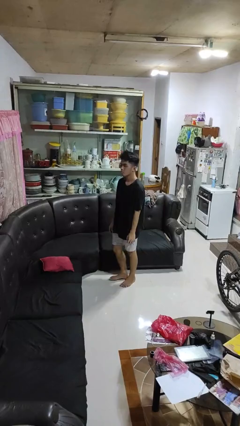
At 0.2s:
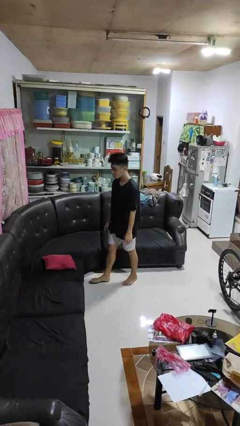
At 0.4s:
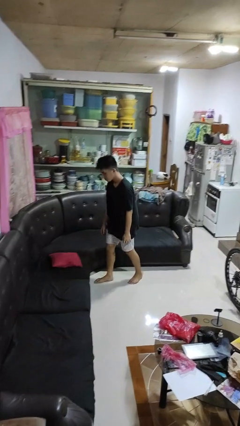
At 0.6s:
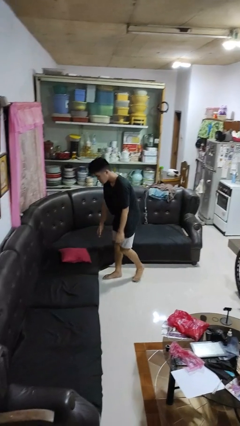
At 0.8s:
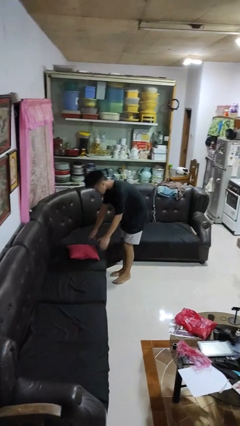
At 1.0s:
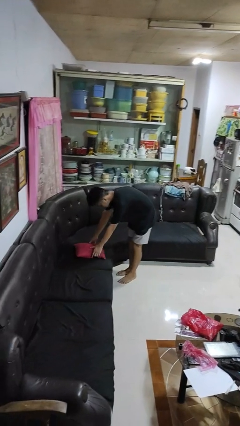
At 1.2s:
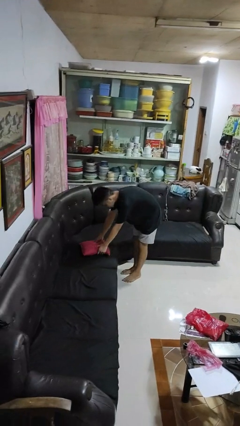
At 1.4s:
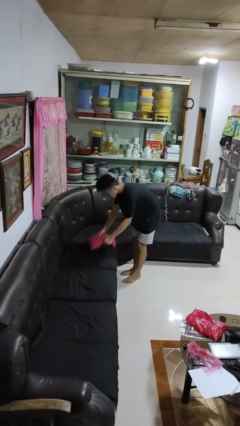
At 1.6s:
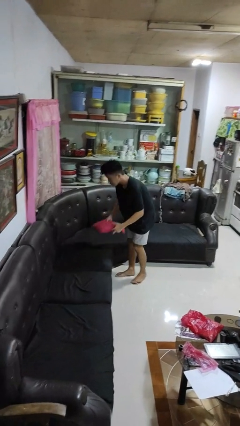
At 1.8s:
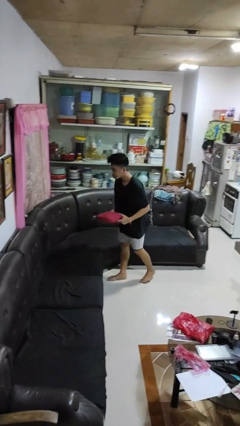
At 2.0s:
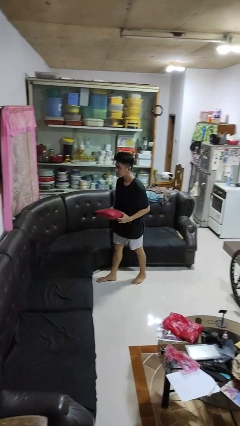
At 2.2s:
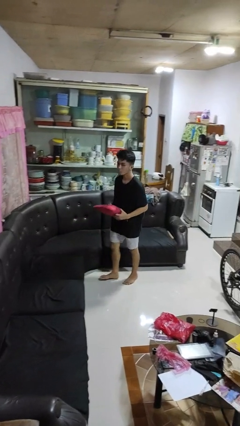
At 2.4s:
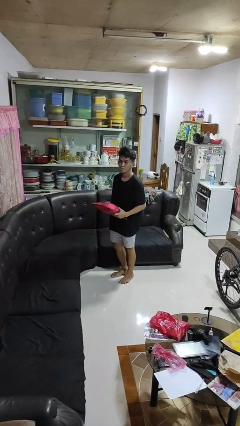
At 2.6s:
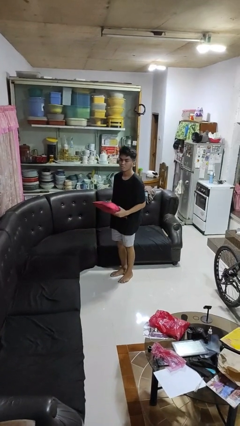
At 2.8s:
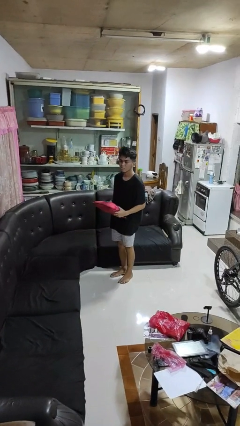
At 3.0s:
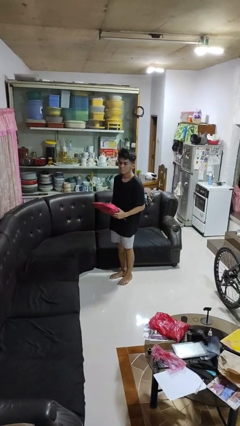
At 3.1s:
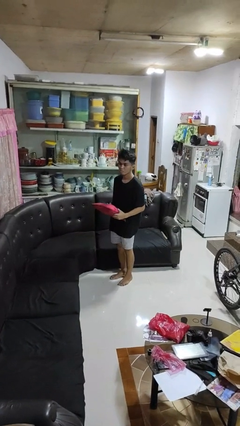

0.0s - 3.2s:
person picks up object from couch

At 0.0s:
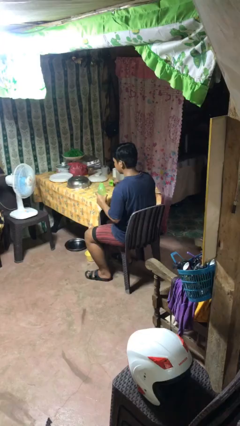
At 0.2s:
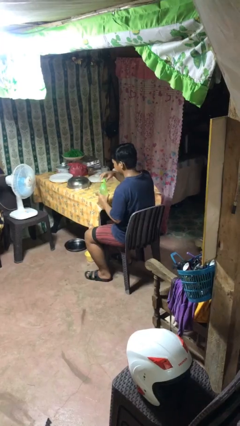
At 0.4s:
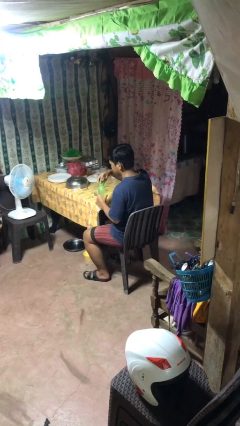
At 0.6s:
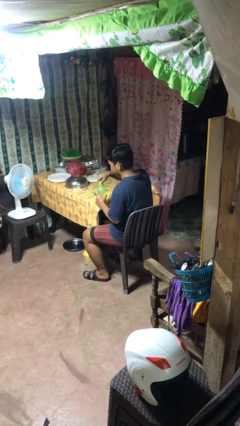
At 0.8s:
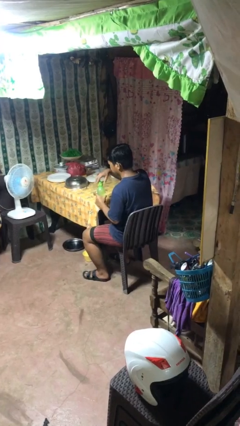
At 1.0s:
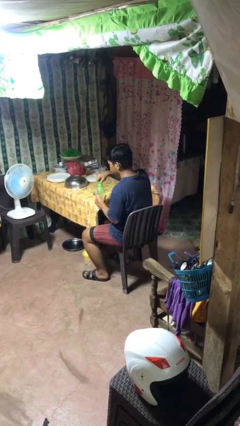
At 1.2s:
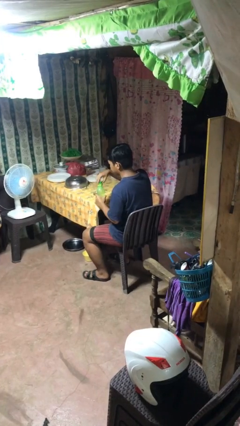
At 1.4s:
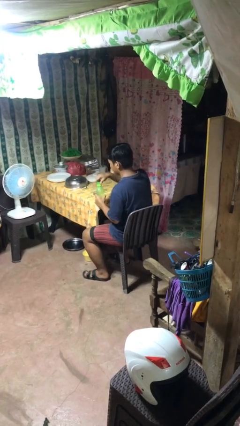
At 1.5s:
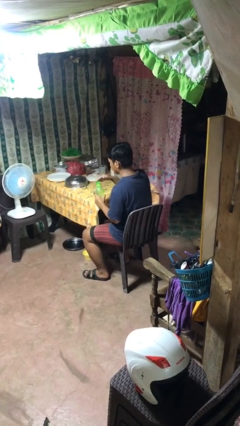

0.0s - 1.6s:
person screws lid to bottle

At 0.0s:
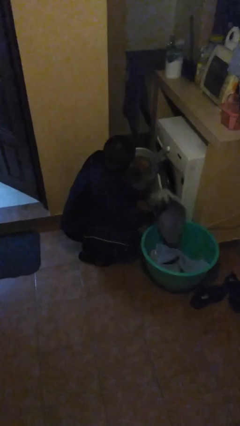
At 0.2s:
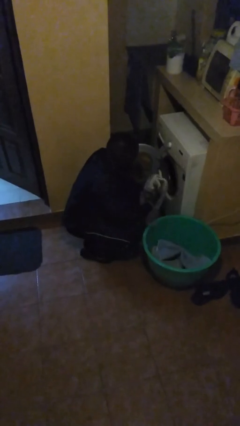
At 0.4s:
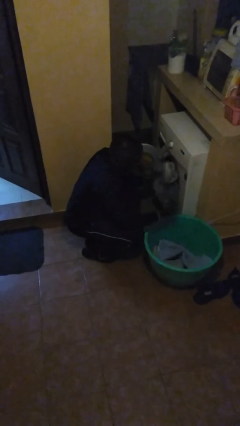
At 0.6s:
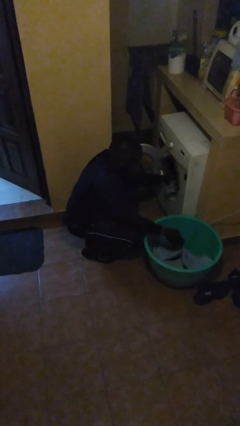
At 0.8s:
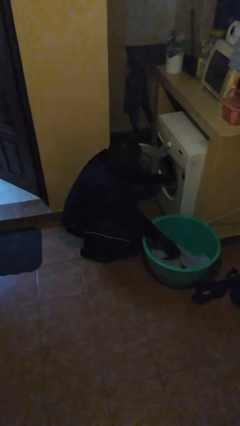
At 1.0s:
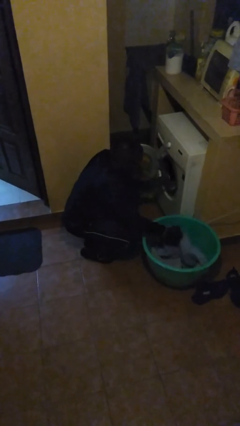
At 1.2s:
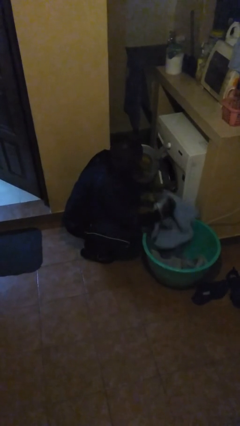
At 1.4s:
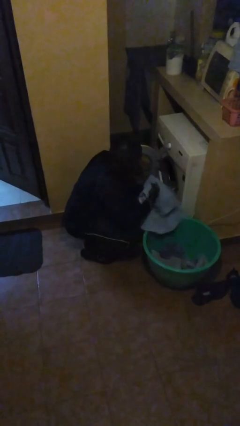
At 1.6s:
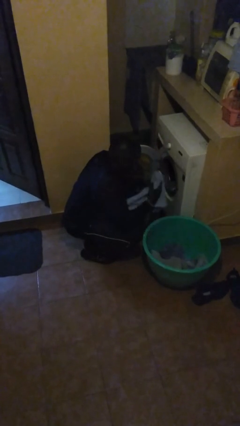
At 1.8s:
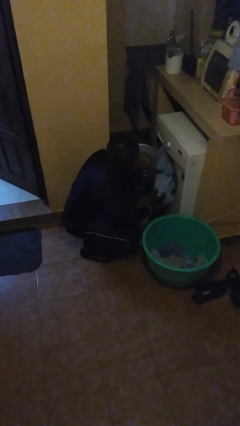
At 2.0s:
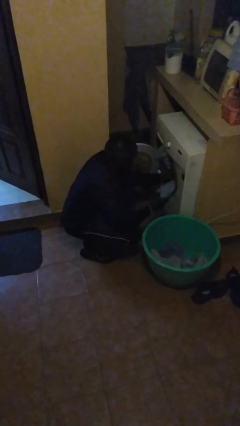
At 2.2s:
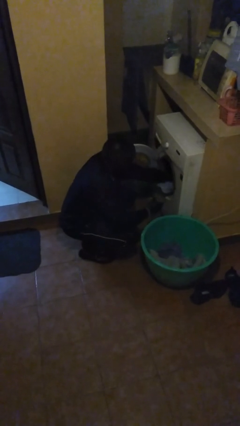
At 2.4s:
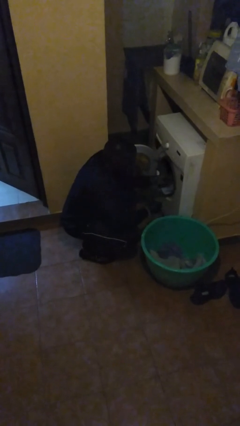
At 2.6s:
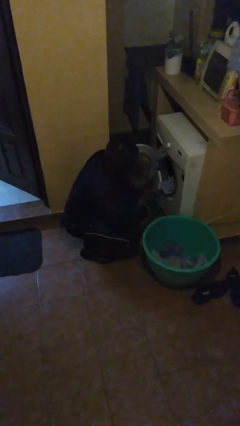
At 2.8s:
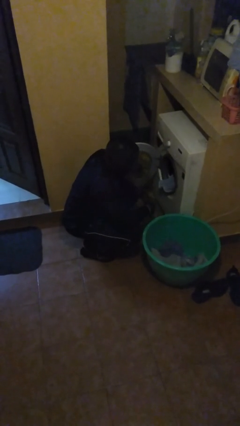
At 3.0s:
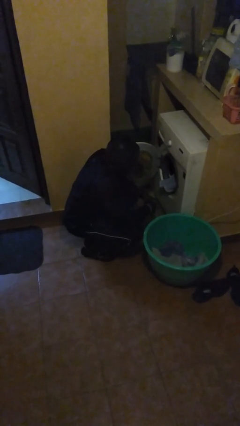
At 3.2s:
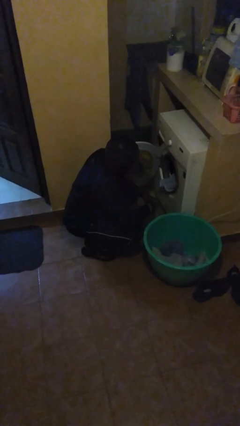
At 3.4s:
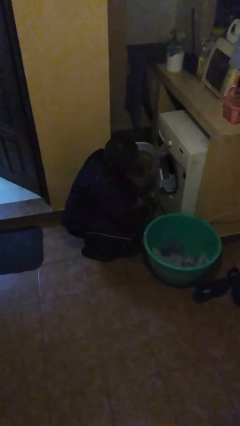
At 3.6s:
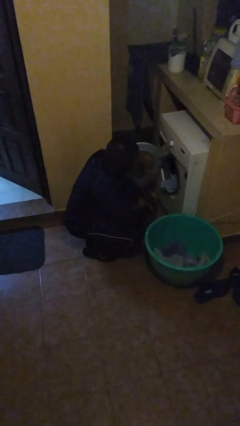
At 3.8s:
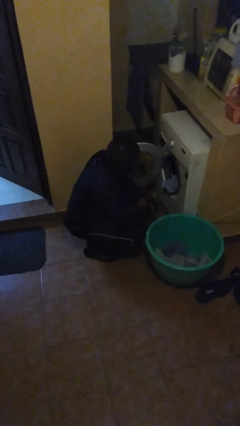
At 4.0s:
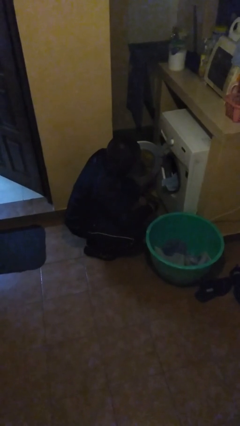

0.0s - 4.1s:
person loads clotheswasher

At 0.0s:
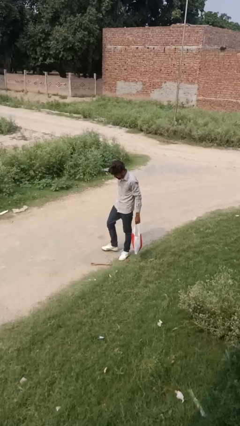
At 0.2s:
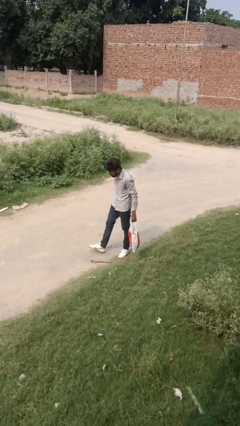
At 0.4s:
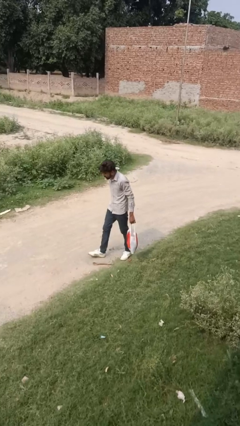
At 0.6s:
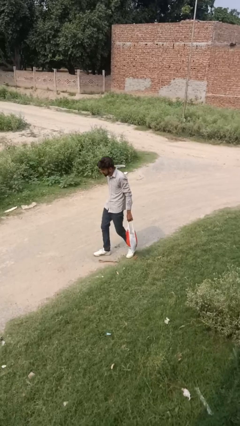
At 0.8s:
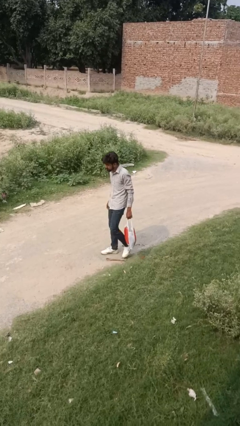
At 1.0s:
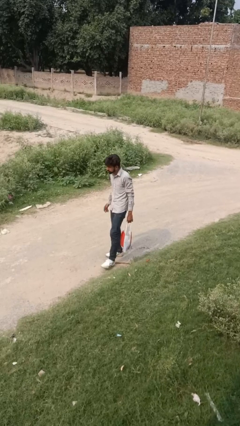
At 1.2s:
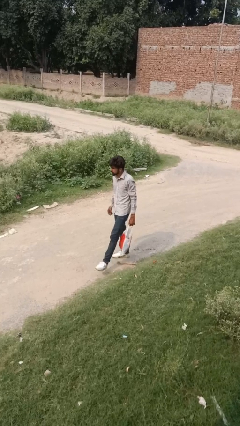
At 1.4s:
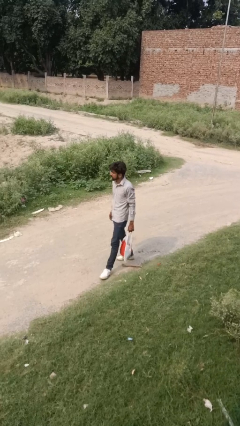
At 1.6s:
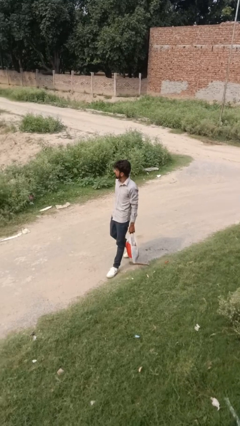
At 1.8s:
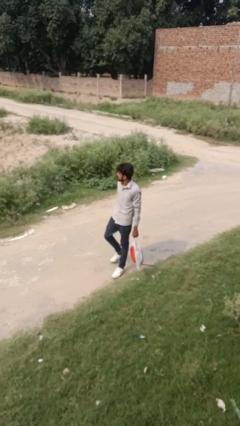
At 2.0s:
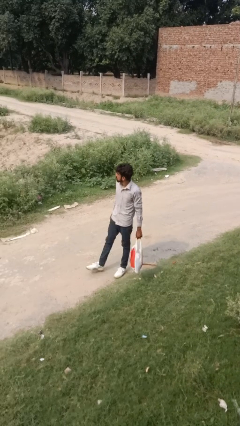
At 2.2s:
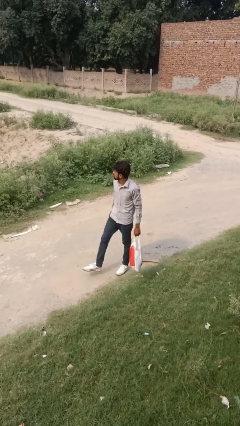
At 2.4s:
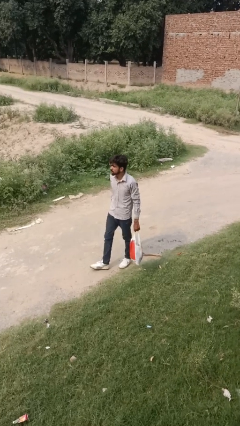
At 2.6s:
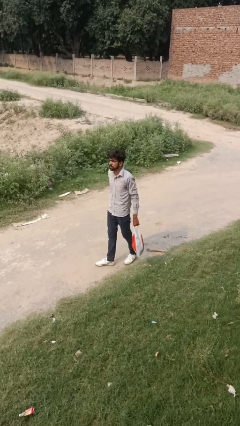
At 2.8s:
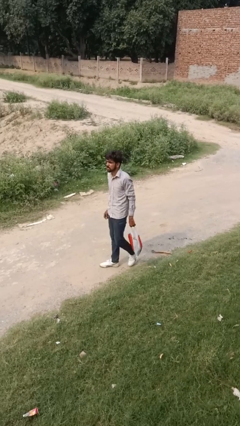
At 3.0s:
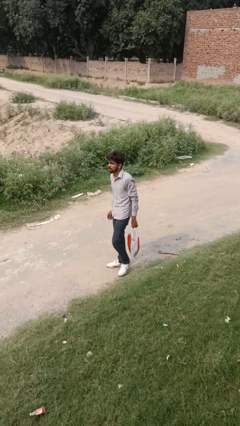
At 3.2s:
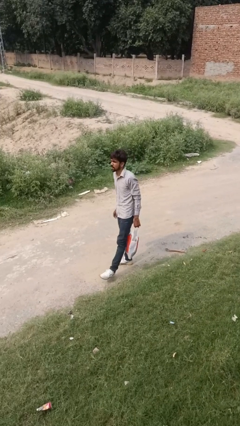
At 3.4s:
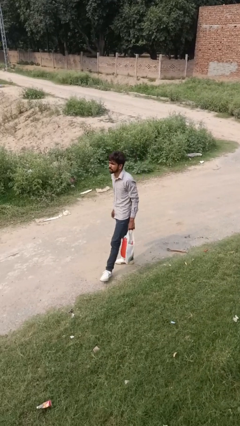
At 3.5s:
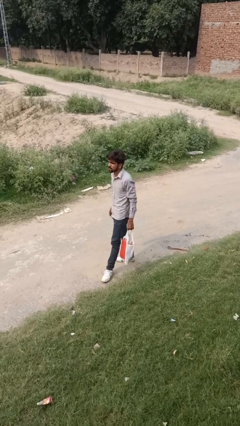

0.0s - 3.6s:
person carries groceries

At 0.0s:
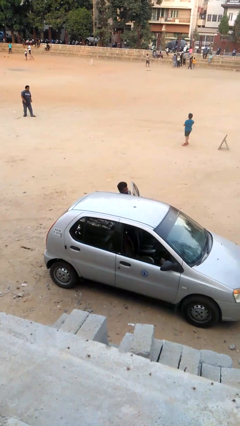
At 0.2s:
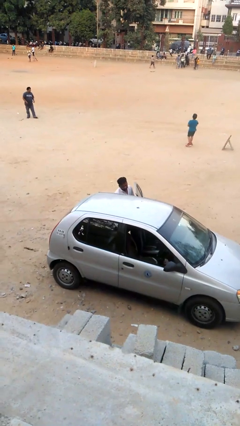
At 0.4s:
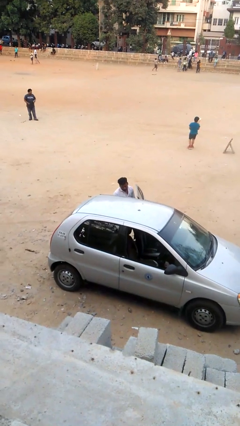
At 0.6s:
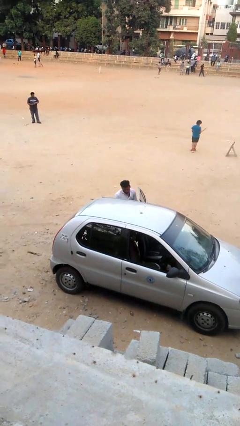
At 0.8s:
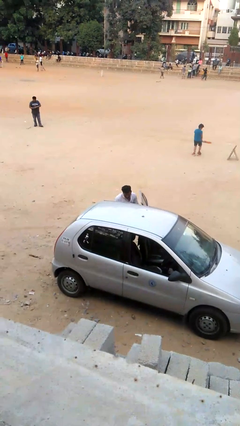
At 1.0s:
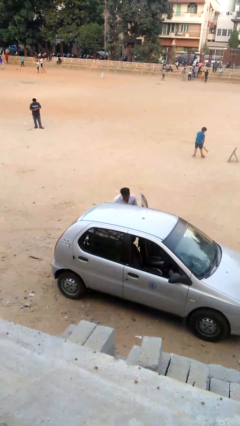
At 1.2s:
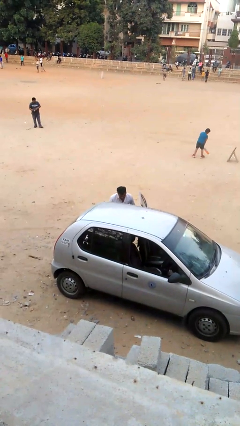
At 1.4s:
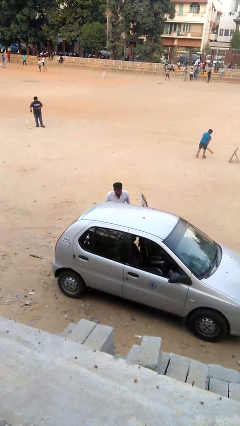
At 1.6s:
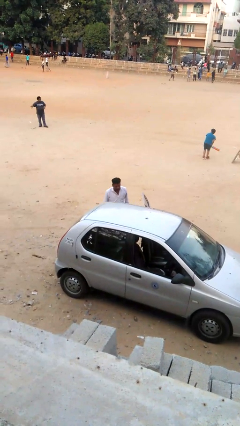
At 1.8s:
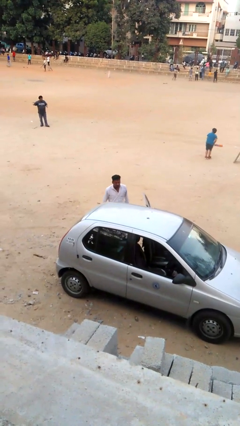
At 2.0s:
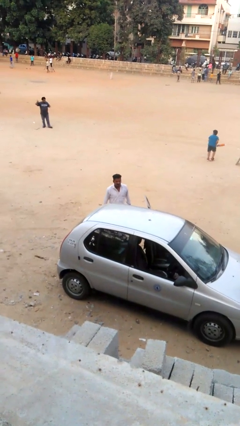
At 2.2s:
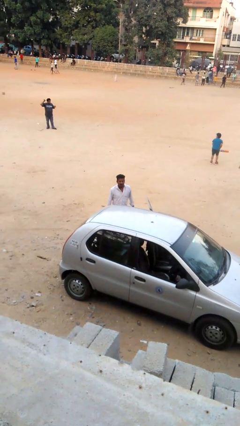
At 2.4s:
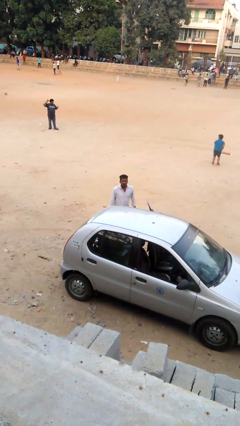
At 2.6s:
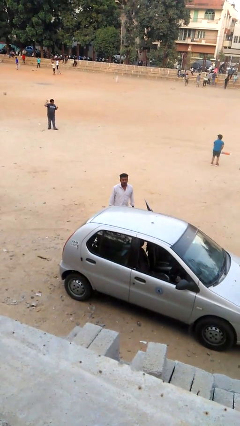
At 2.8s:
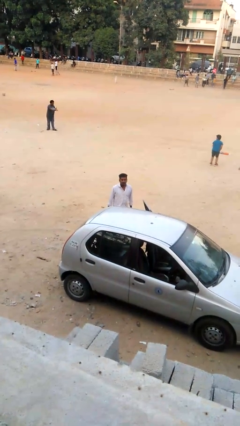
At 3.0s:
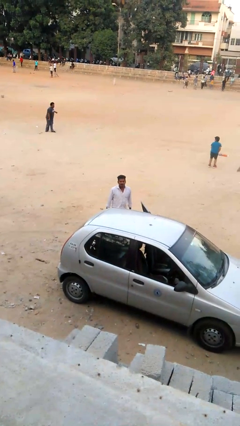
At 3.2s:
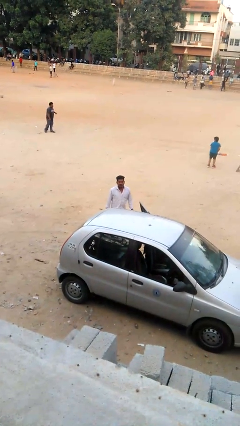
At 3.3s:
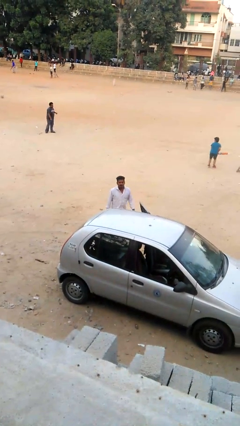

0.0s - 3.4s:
person exits car

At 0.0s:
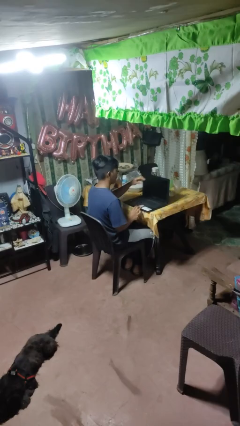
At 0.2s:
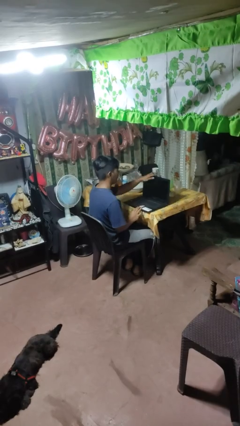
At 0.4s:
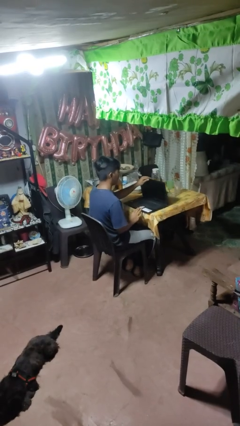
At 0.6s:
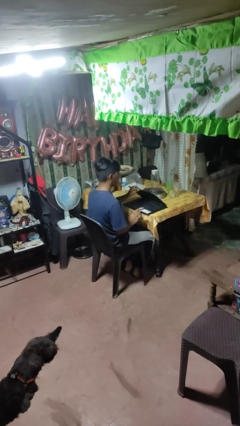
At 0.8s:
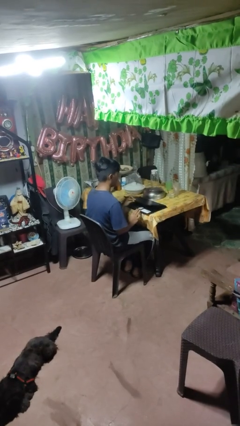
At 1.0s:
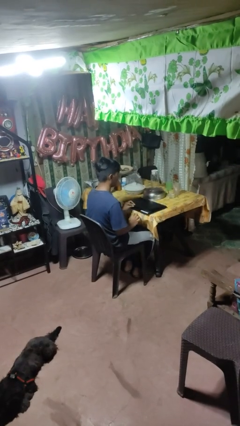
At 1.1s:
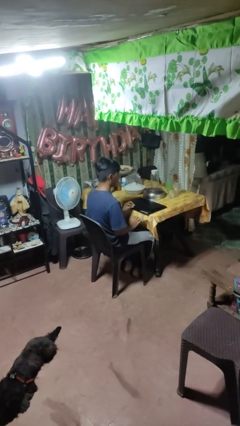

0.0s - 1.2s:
person closes laptop

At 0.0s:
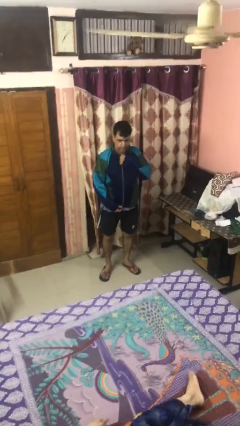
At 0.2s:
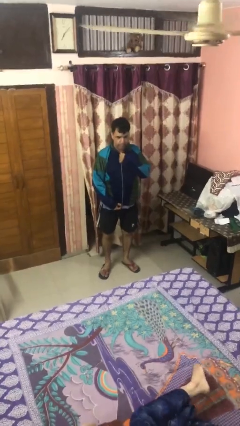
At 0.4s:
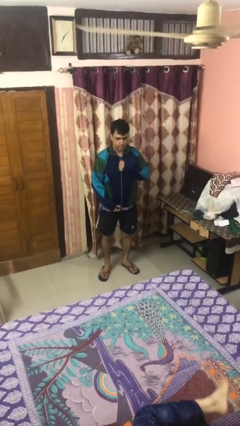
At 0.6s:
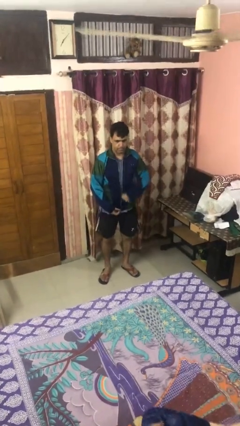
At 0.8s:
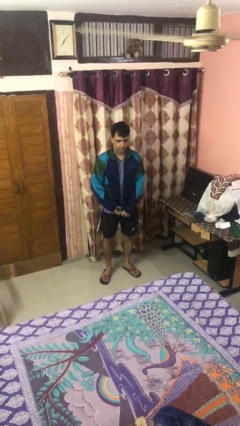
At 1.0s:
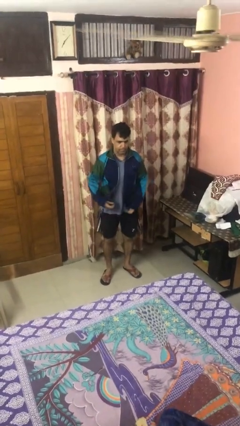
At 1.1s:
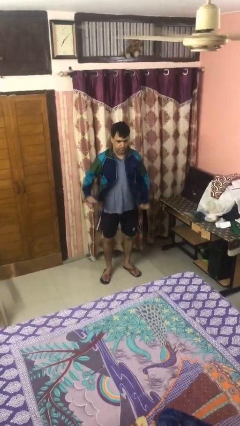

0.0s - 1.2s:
person unzips jacket
